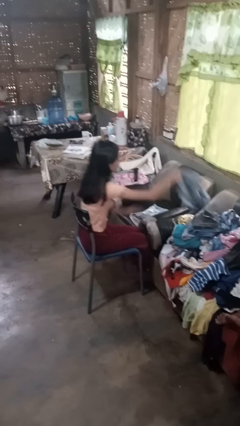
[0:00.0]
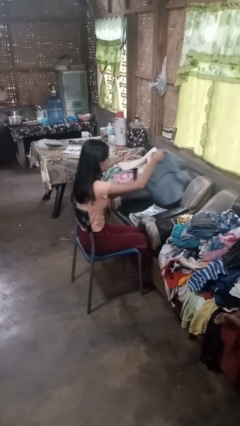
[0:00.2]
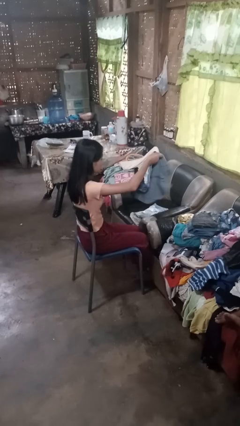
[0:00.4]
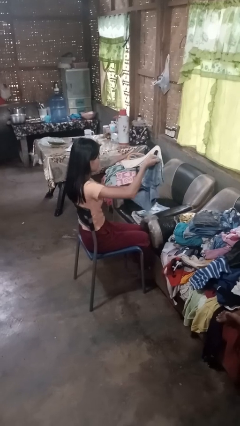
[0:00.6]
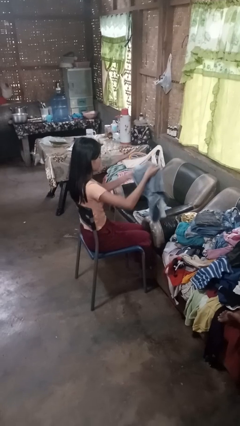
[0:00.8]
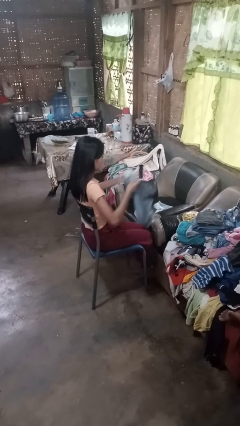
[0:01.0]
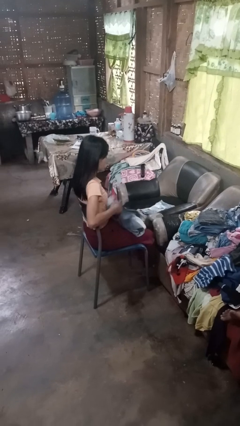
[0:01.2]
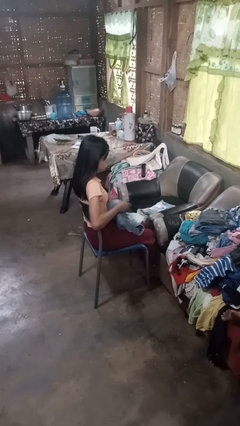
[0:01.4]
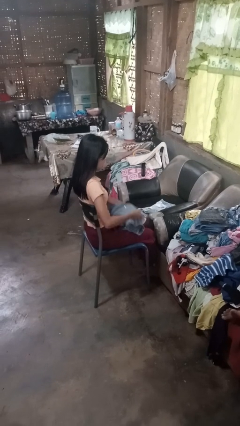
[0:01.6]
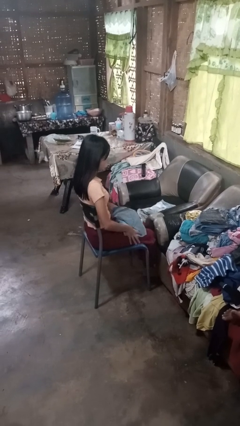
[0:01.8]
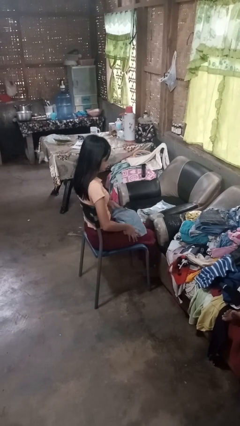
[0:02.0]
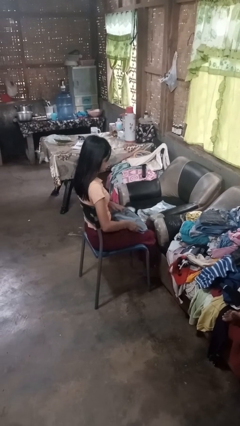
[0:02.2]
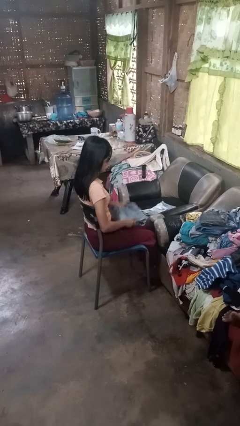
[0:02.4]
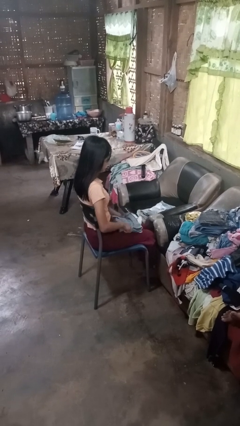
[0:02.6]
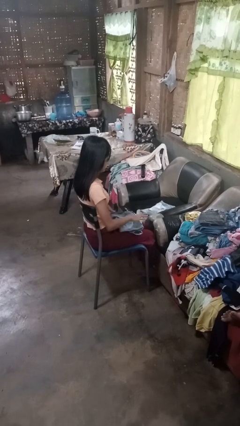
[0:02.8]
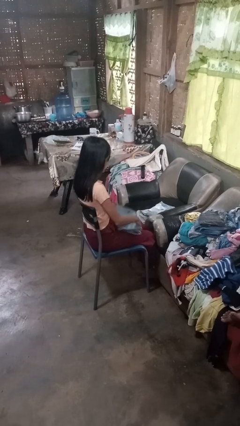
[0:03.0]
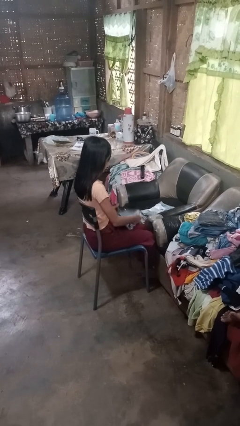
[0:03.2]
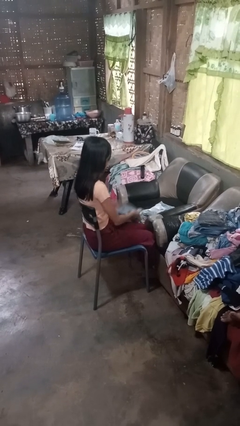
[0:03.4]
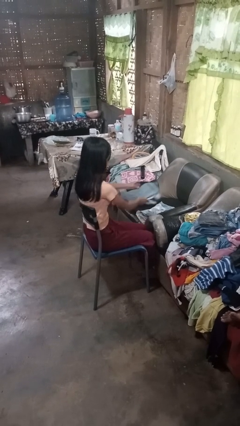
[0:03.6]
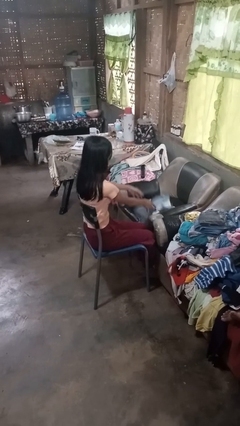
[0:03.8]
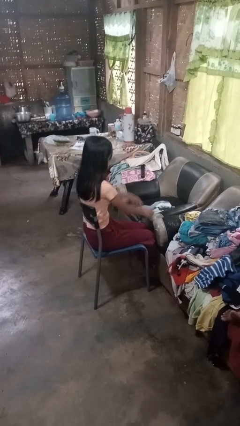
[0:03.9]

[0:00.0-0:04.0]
person folds pants

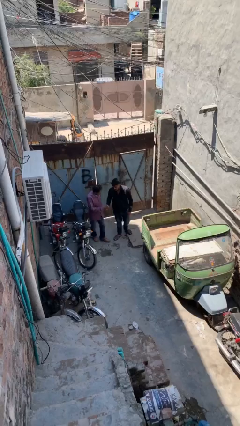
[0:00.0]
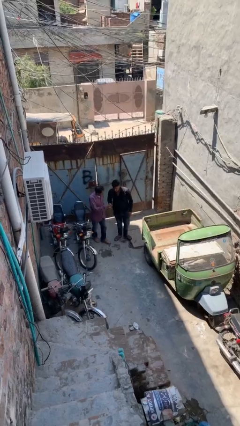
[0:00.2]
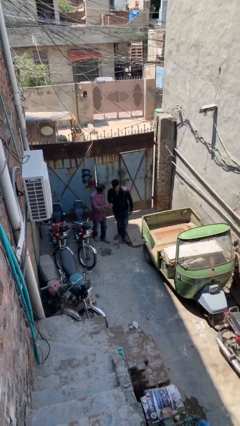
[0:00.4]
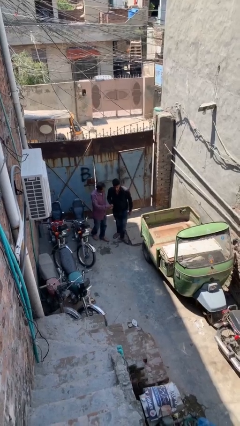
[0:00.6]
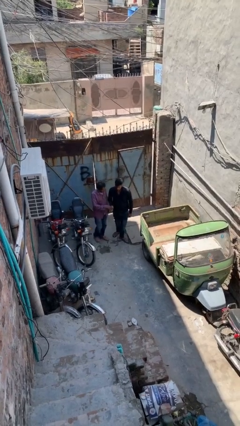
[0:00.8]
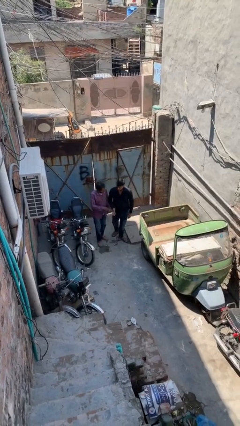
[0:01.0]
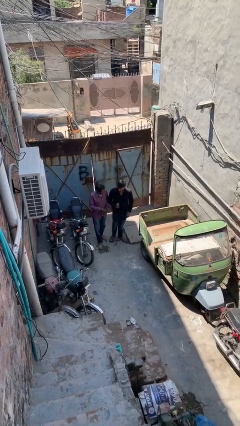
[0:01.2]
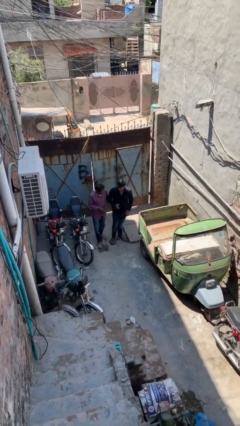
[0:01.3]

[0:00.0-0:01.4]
person shakes hand

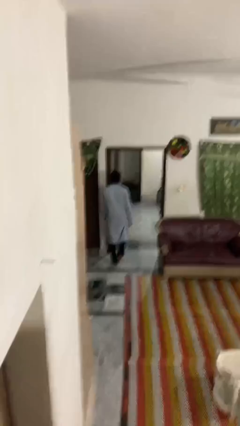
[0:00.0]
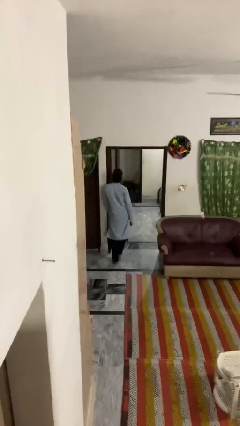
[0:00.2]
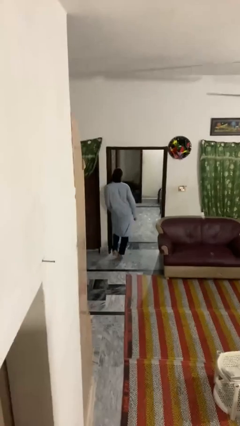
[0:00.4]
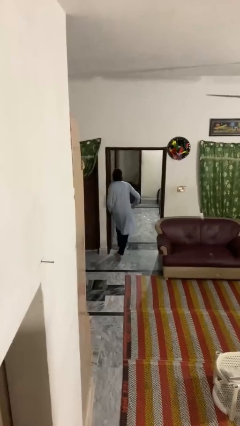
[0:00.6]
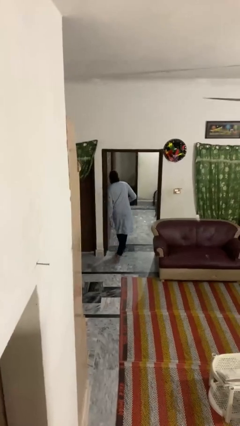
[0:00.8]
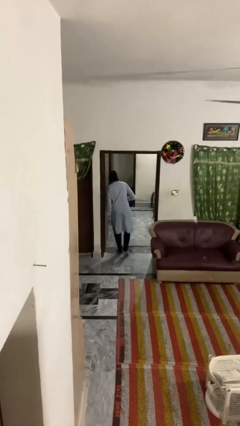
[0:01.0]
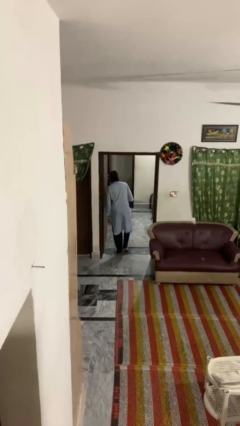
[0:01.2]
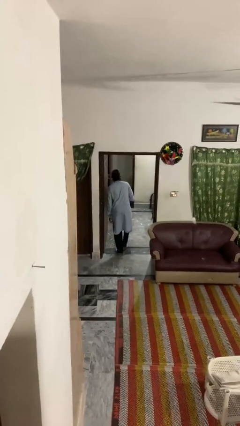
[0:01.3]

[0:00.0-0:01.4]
person bumps into wall

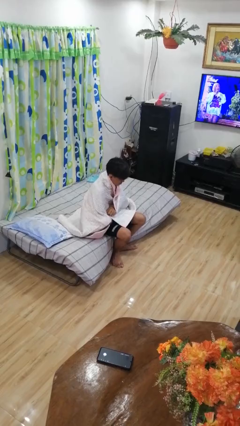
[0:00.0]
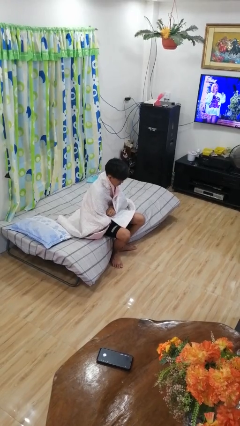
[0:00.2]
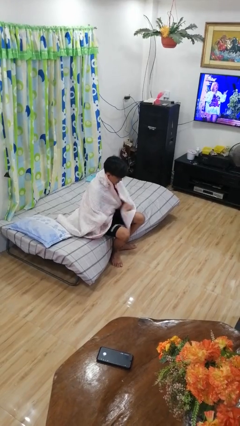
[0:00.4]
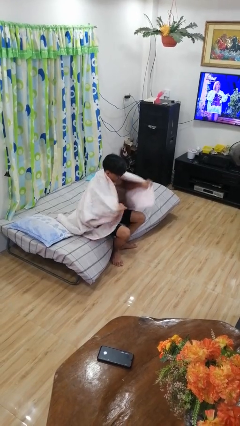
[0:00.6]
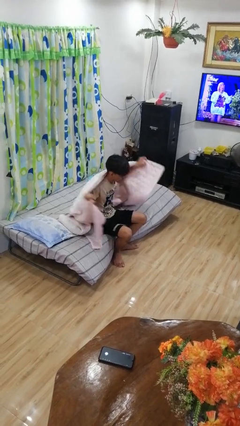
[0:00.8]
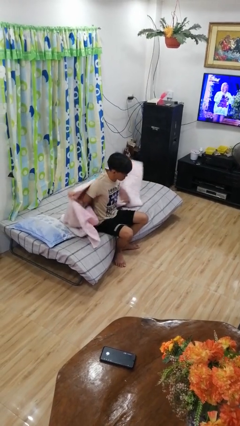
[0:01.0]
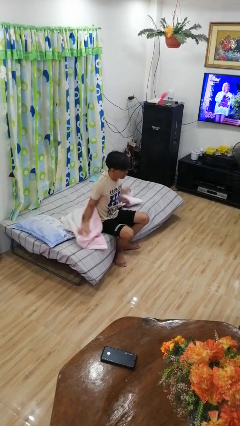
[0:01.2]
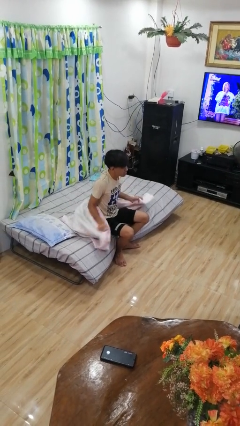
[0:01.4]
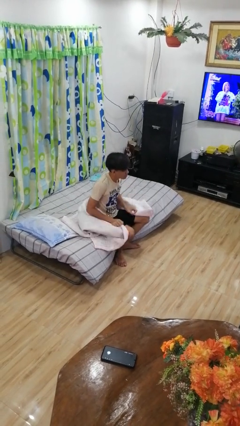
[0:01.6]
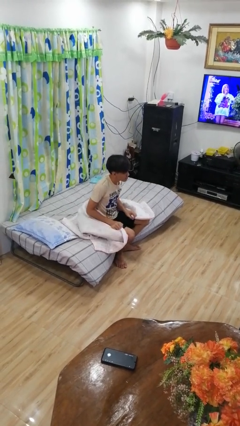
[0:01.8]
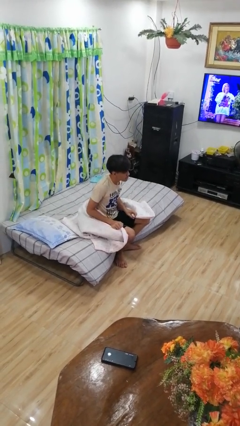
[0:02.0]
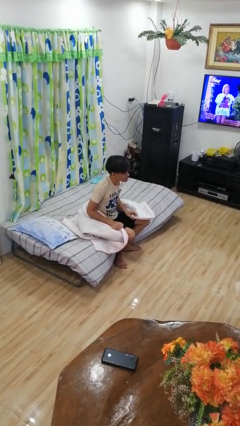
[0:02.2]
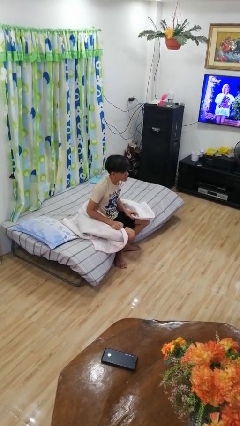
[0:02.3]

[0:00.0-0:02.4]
person uncovers with bedsheets

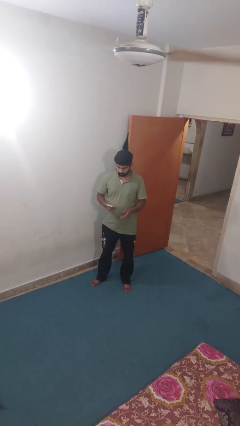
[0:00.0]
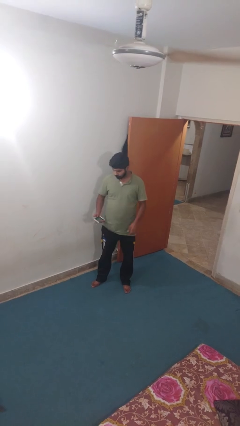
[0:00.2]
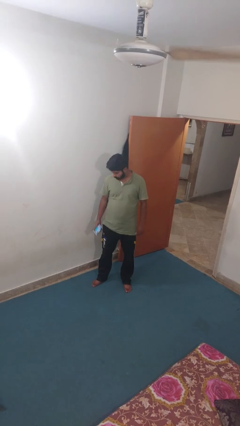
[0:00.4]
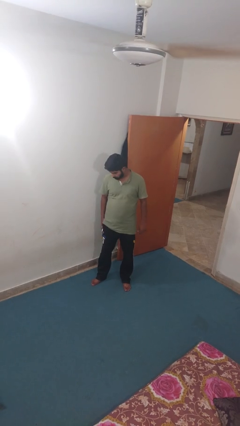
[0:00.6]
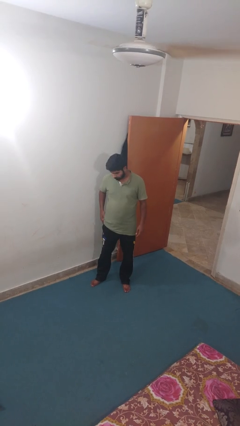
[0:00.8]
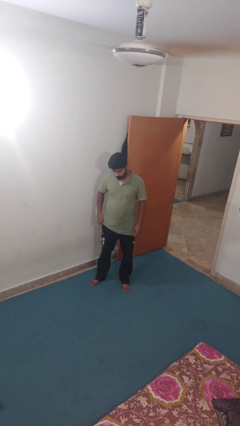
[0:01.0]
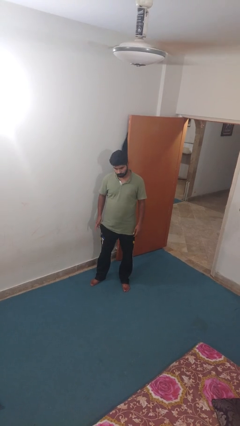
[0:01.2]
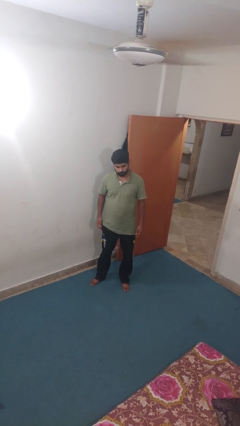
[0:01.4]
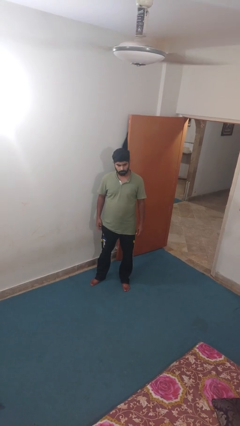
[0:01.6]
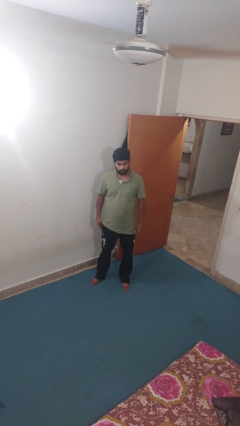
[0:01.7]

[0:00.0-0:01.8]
person puts phone into pocket

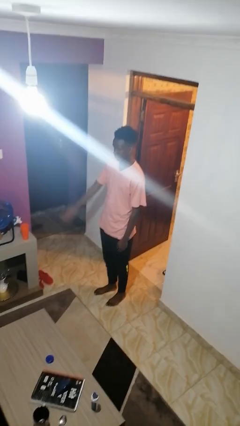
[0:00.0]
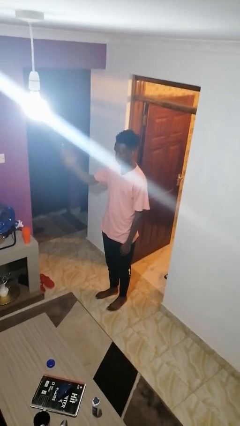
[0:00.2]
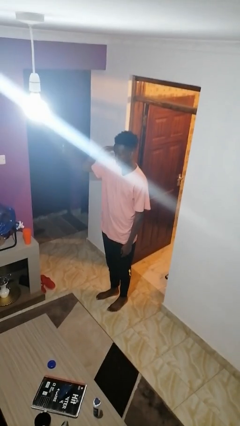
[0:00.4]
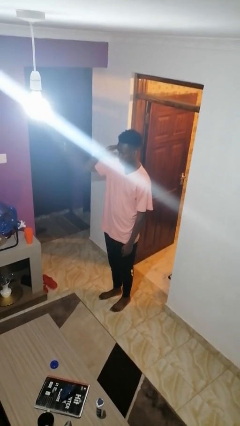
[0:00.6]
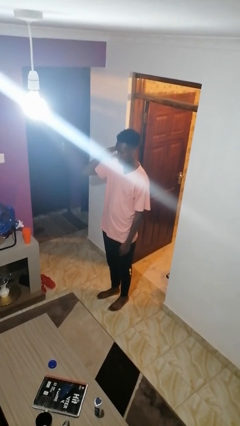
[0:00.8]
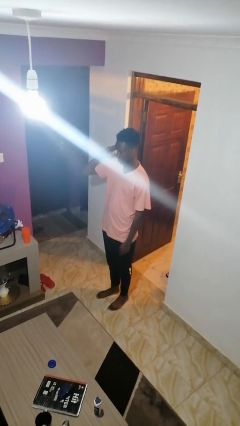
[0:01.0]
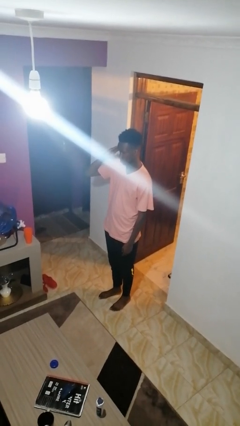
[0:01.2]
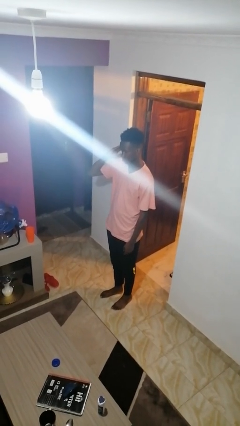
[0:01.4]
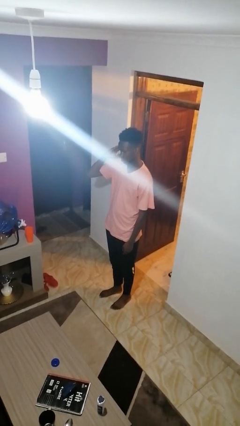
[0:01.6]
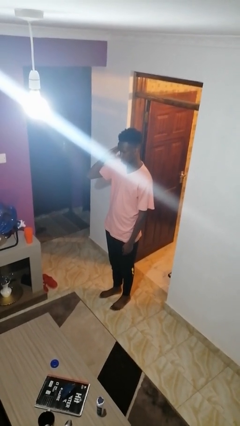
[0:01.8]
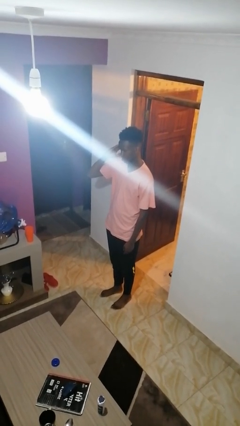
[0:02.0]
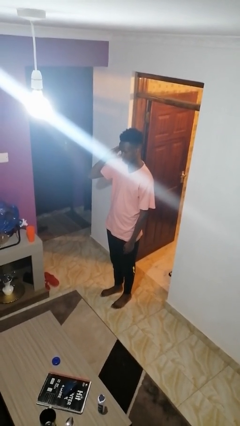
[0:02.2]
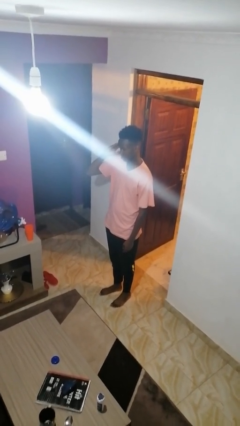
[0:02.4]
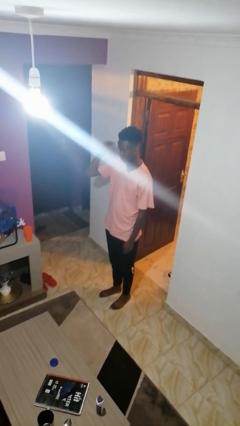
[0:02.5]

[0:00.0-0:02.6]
person salutes

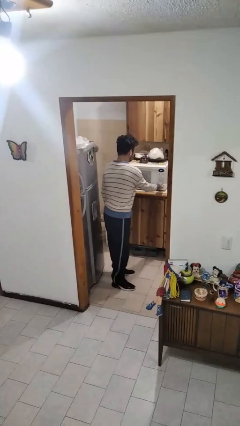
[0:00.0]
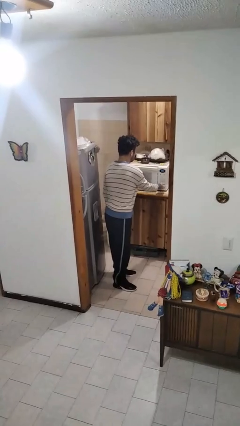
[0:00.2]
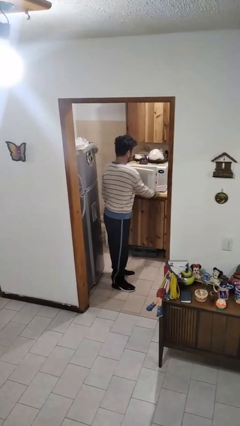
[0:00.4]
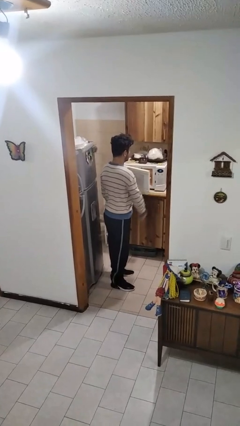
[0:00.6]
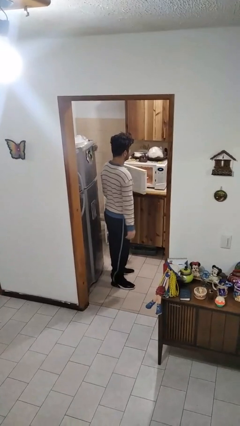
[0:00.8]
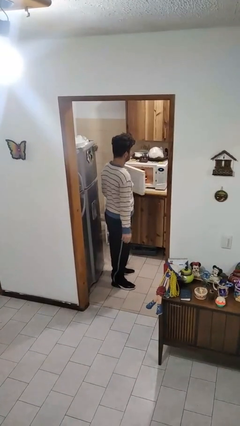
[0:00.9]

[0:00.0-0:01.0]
person opens microwave

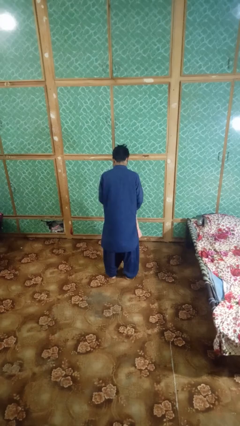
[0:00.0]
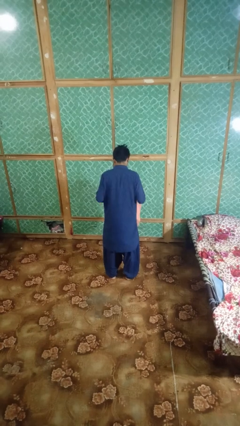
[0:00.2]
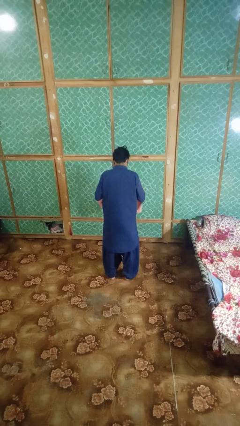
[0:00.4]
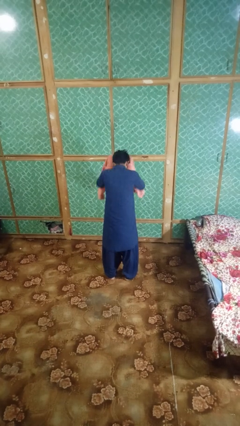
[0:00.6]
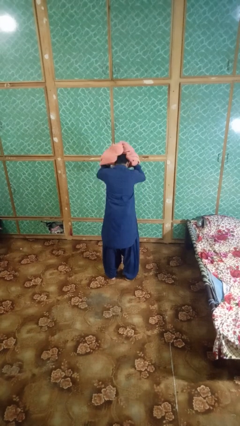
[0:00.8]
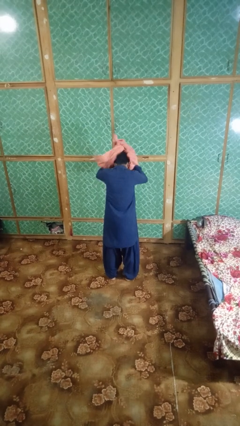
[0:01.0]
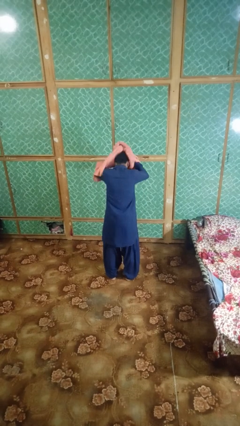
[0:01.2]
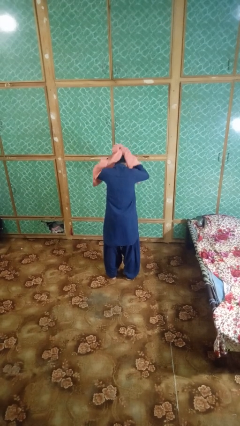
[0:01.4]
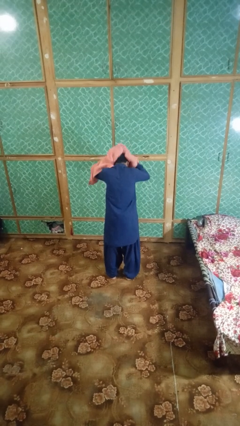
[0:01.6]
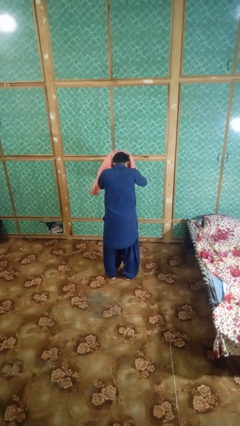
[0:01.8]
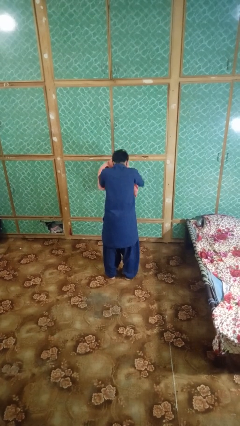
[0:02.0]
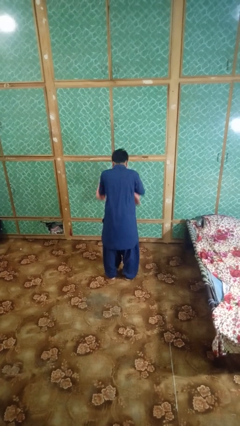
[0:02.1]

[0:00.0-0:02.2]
person dries hair with towel
